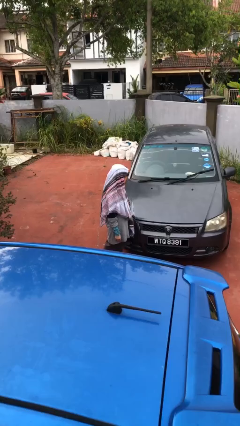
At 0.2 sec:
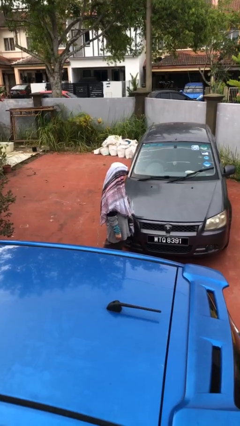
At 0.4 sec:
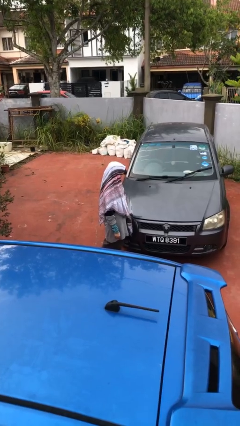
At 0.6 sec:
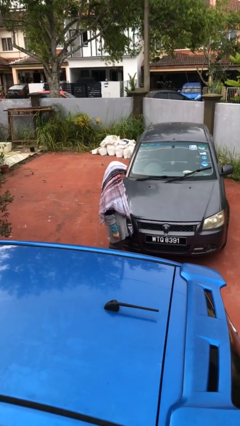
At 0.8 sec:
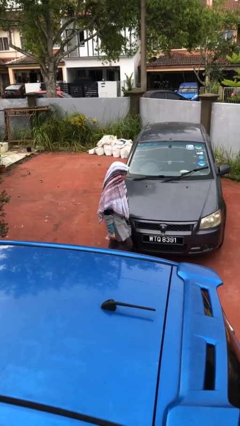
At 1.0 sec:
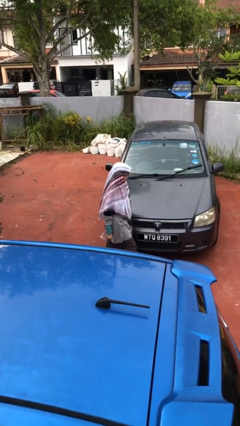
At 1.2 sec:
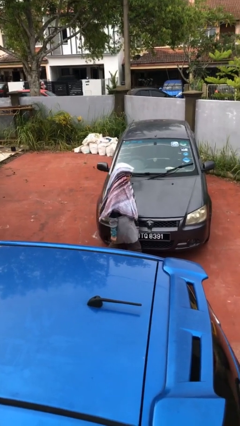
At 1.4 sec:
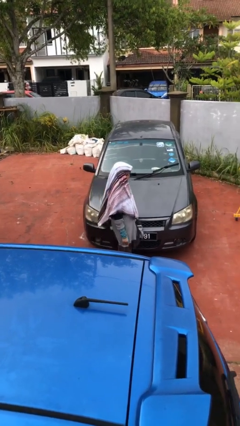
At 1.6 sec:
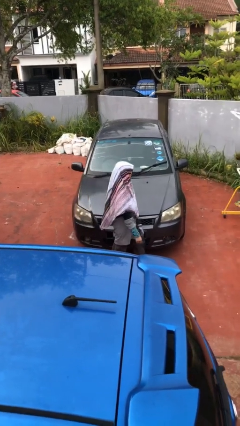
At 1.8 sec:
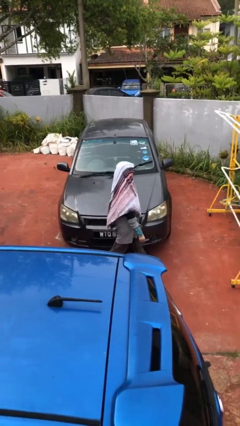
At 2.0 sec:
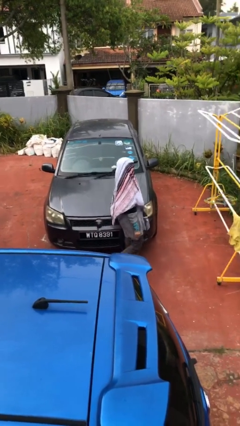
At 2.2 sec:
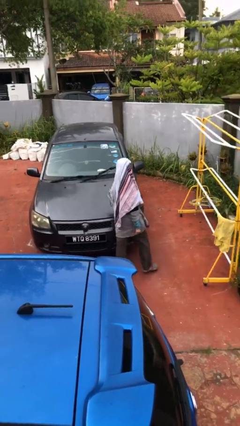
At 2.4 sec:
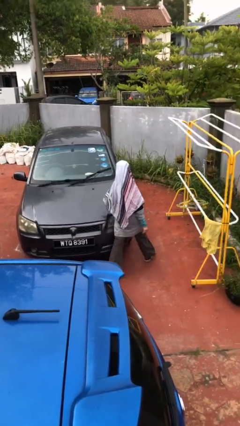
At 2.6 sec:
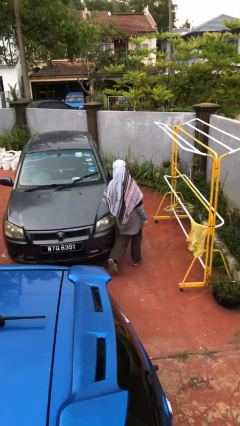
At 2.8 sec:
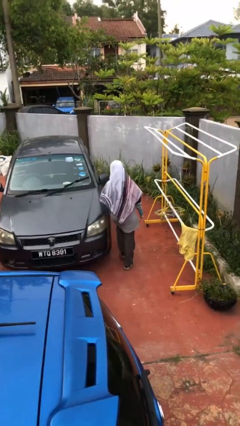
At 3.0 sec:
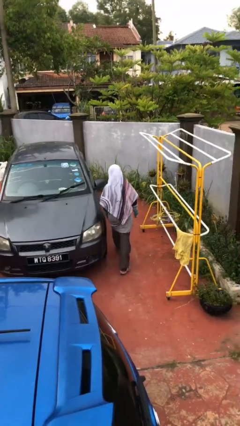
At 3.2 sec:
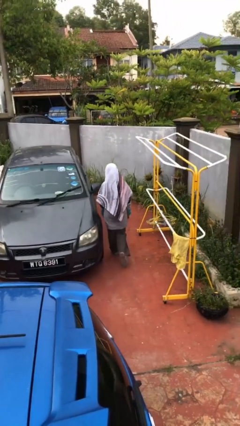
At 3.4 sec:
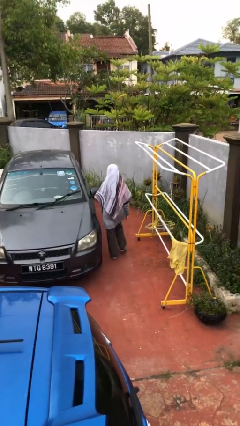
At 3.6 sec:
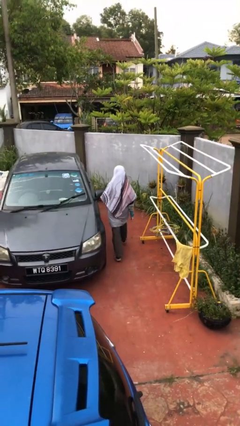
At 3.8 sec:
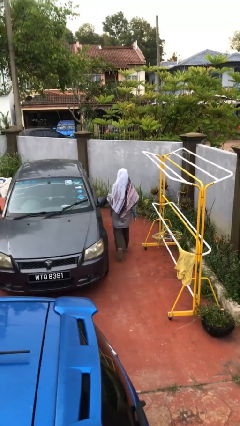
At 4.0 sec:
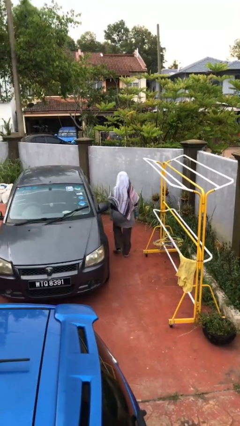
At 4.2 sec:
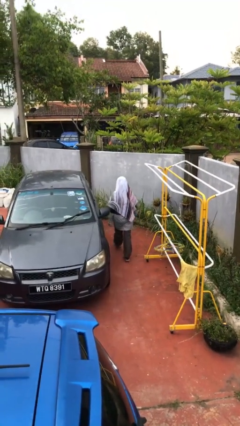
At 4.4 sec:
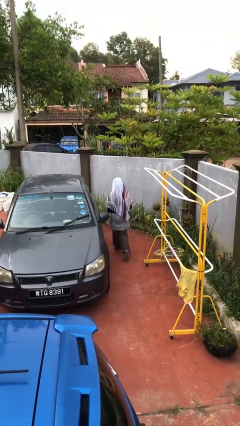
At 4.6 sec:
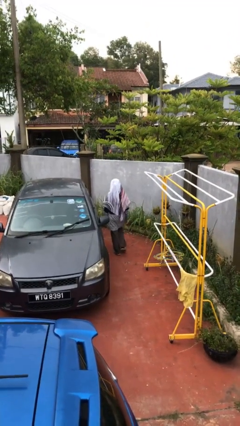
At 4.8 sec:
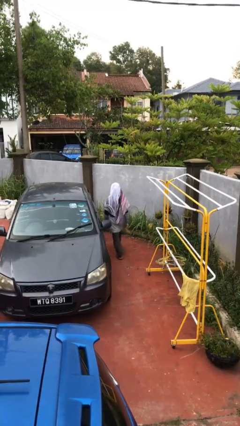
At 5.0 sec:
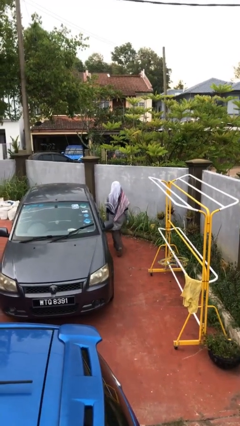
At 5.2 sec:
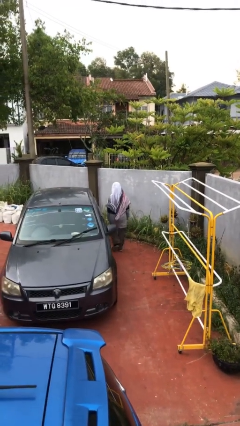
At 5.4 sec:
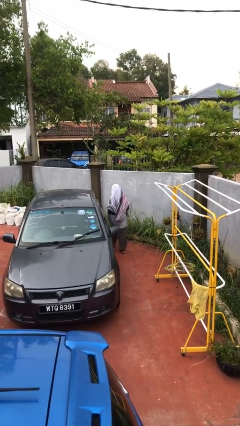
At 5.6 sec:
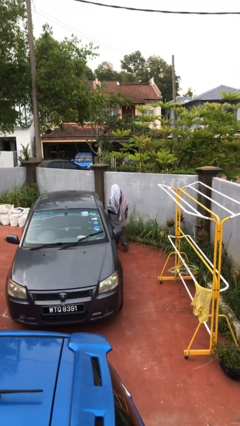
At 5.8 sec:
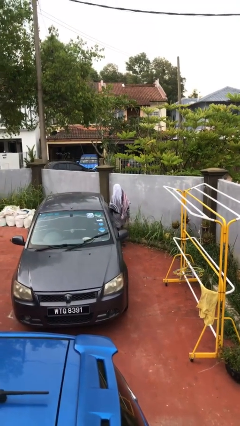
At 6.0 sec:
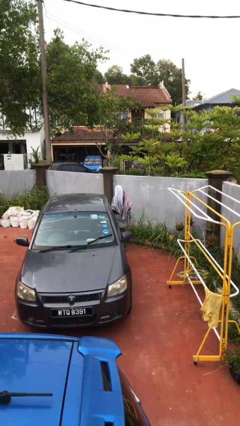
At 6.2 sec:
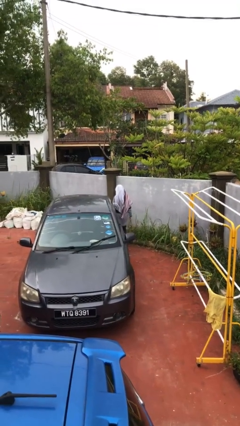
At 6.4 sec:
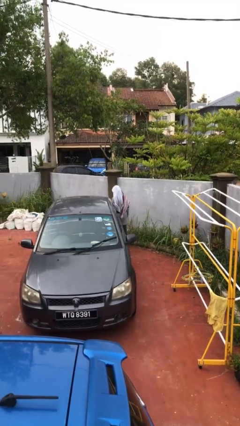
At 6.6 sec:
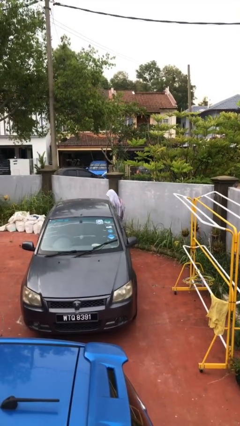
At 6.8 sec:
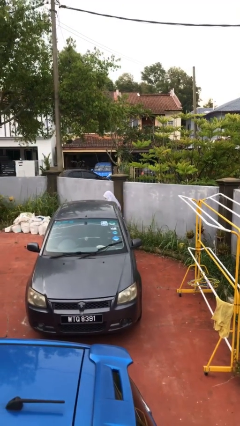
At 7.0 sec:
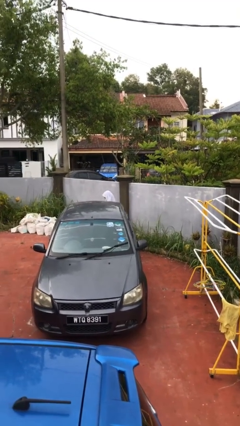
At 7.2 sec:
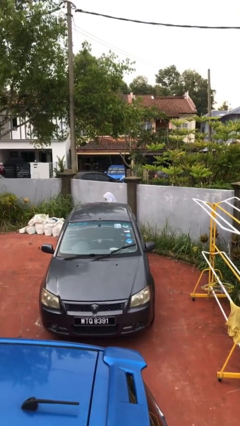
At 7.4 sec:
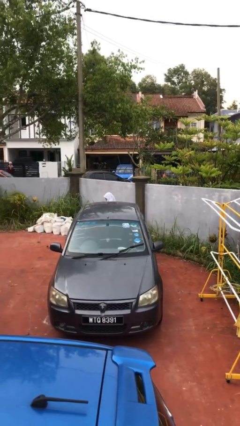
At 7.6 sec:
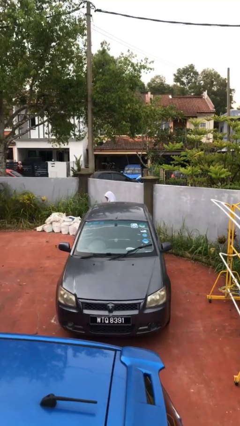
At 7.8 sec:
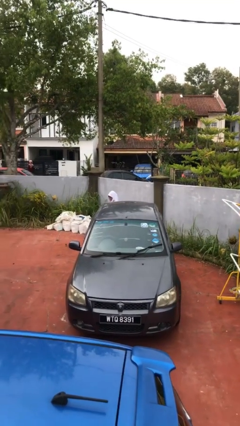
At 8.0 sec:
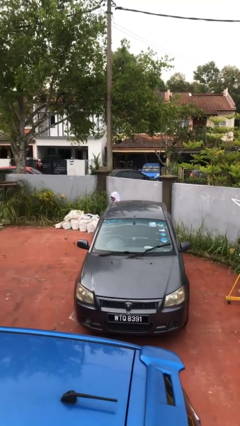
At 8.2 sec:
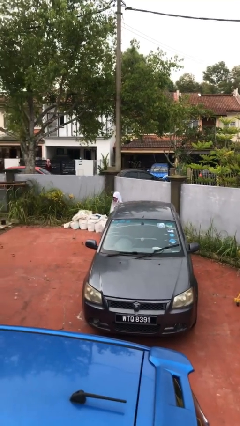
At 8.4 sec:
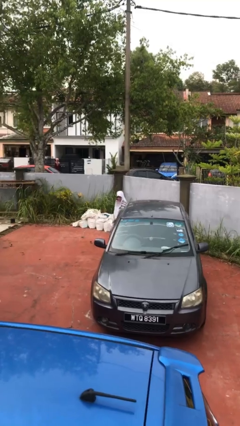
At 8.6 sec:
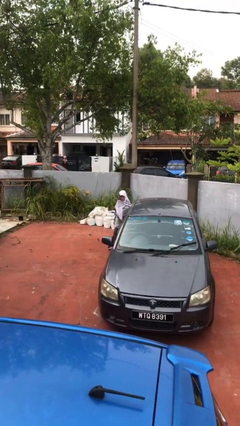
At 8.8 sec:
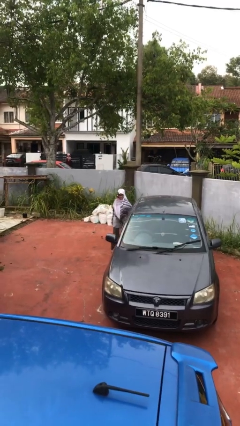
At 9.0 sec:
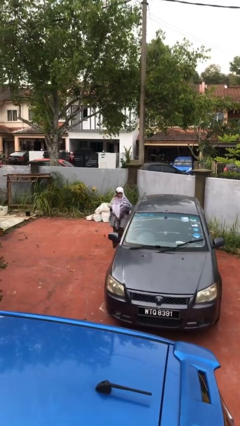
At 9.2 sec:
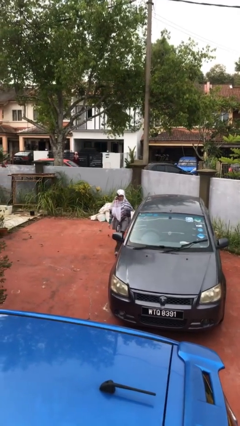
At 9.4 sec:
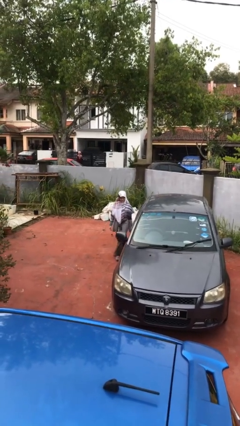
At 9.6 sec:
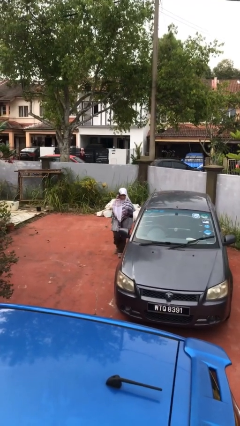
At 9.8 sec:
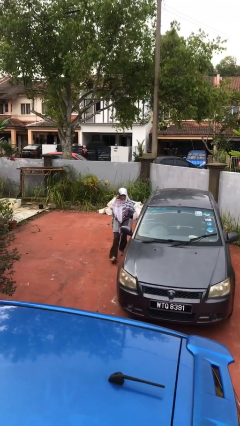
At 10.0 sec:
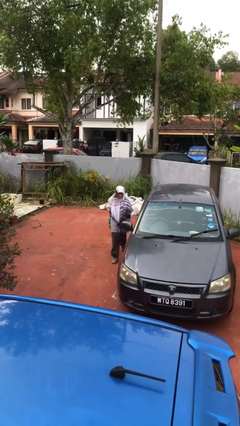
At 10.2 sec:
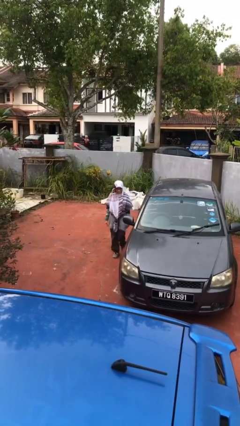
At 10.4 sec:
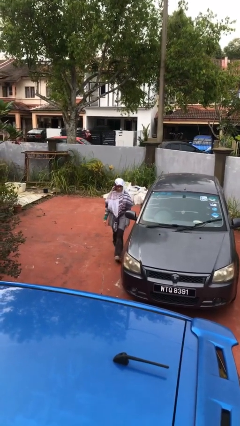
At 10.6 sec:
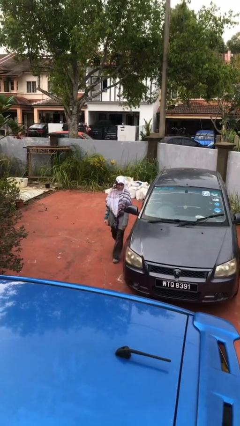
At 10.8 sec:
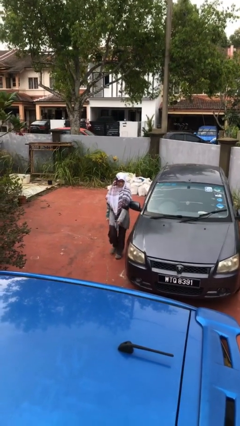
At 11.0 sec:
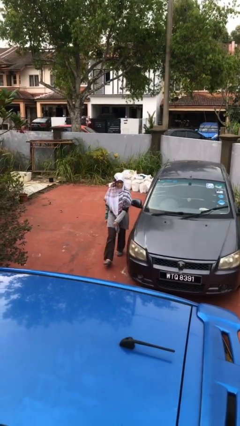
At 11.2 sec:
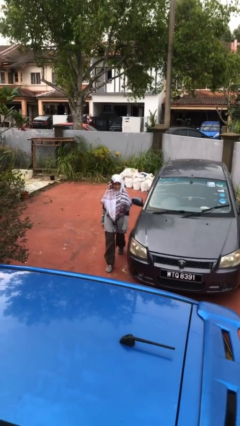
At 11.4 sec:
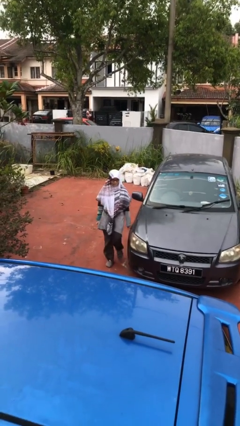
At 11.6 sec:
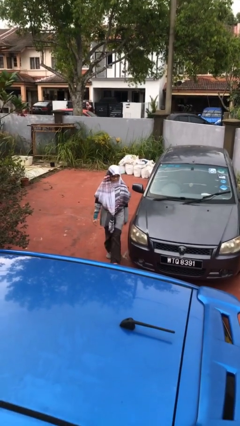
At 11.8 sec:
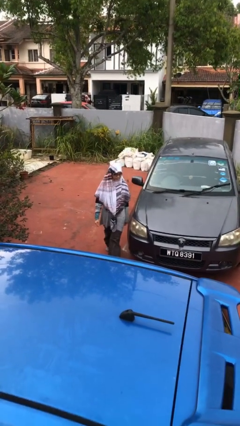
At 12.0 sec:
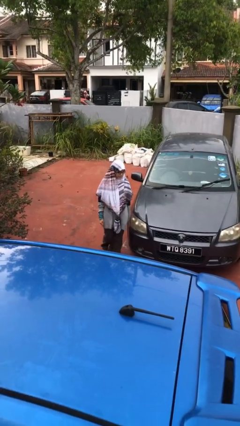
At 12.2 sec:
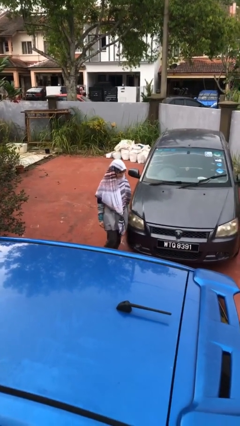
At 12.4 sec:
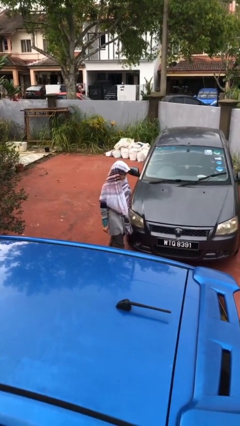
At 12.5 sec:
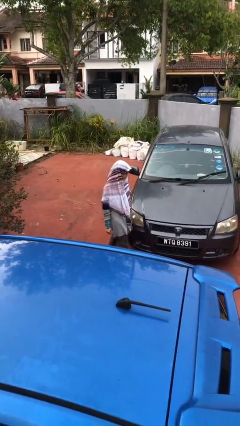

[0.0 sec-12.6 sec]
person walks around car

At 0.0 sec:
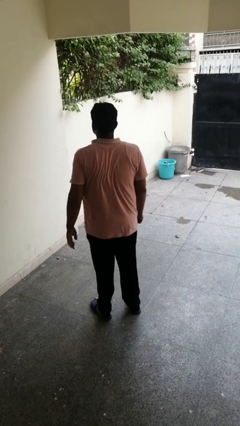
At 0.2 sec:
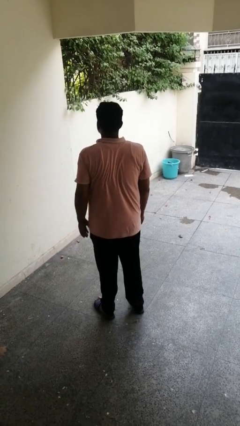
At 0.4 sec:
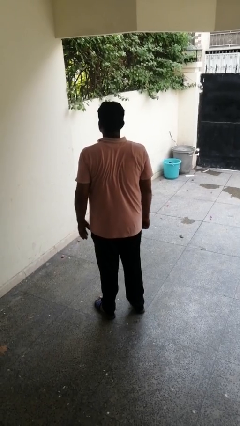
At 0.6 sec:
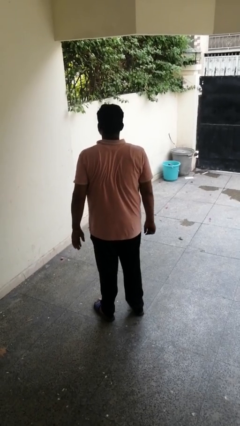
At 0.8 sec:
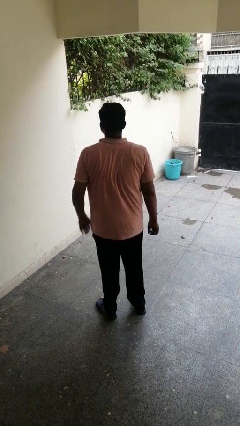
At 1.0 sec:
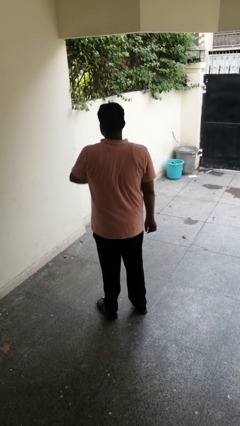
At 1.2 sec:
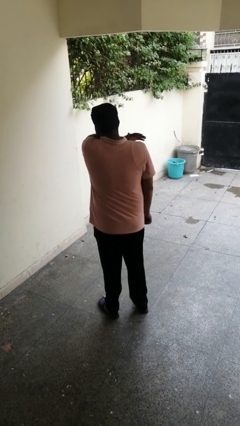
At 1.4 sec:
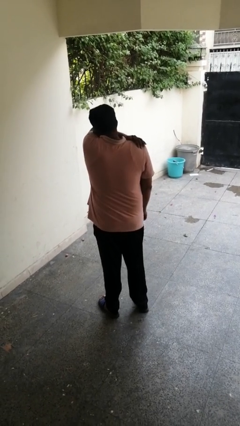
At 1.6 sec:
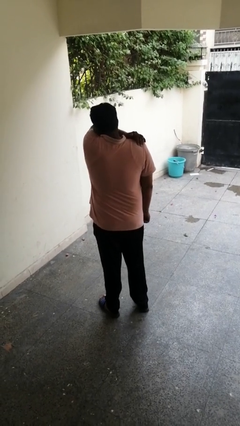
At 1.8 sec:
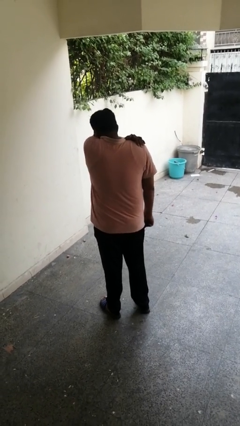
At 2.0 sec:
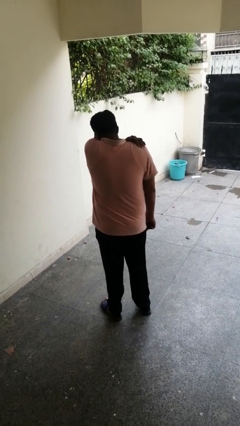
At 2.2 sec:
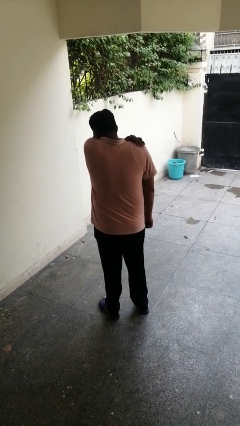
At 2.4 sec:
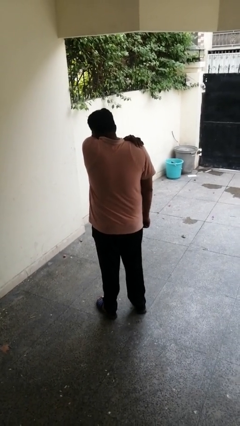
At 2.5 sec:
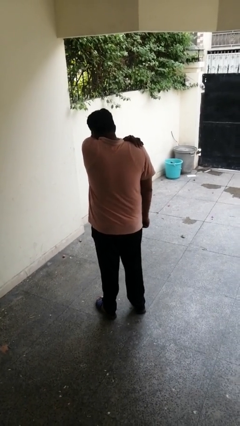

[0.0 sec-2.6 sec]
person sneezes into arm

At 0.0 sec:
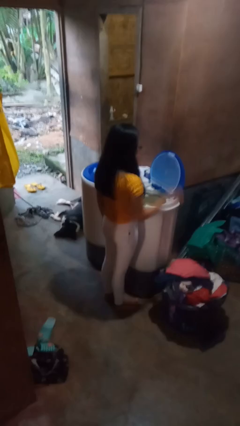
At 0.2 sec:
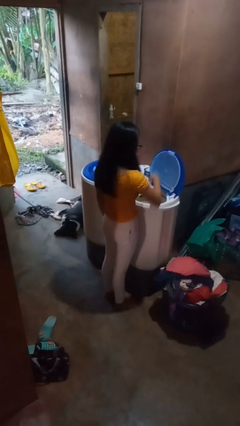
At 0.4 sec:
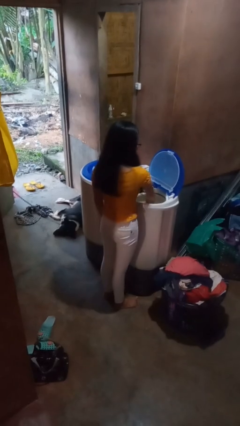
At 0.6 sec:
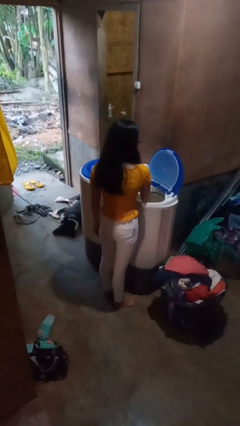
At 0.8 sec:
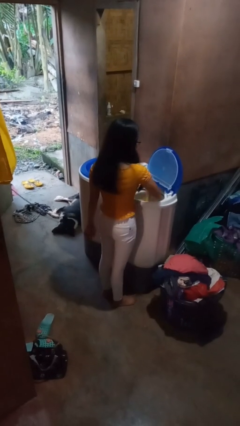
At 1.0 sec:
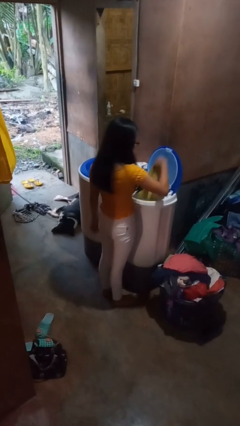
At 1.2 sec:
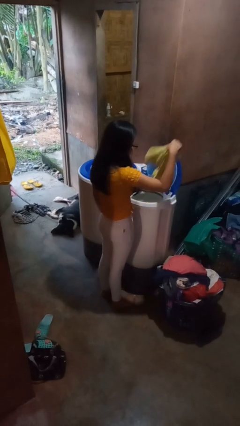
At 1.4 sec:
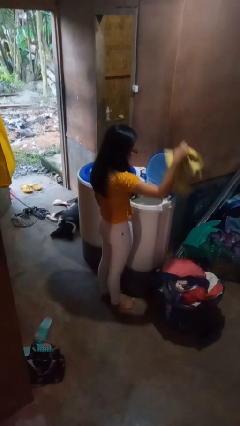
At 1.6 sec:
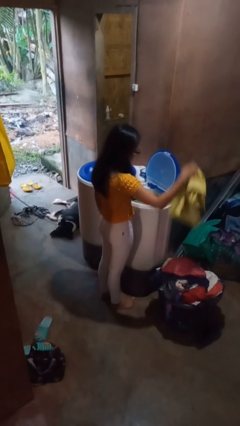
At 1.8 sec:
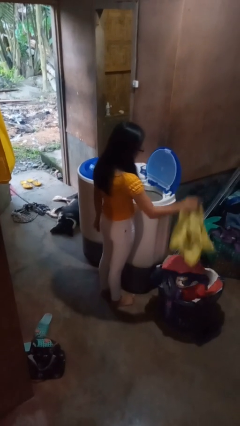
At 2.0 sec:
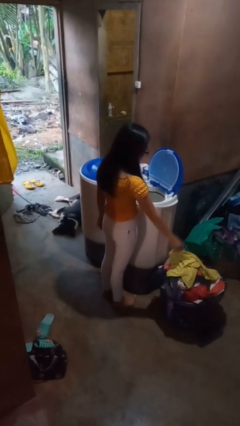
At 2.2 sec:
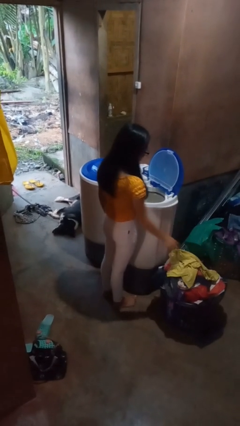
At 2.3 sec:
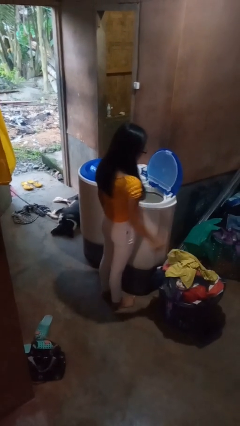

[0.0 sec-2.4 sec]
person unloads dryer

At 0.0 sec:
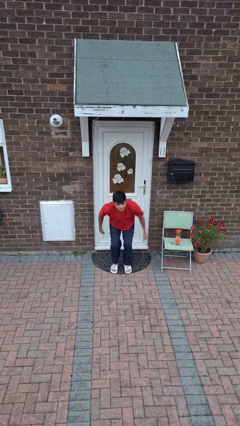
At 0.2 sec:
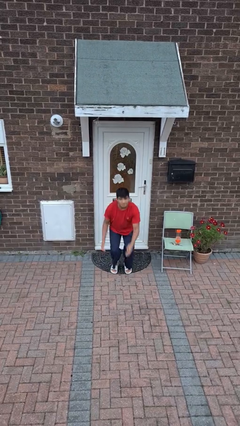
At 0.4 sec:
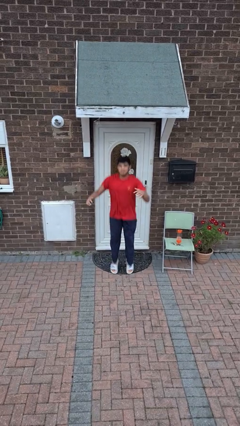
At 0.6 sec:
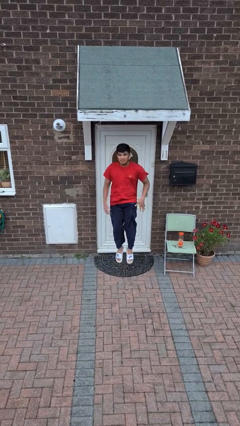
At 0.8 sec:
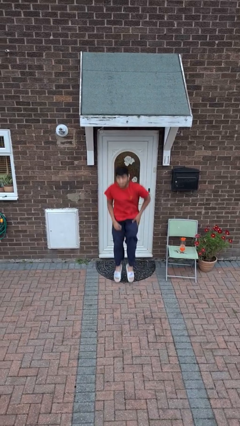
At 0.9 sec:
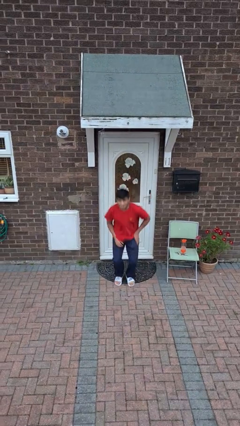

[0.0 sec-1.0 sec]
person jumps
